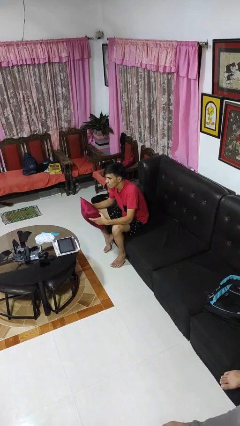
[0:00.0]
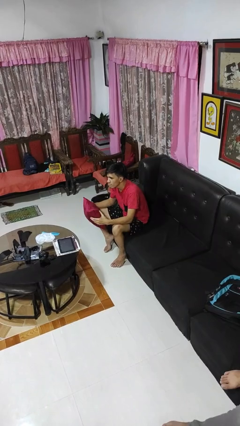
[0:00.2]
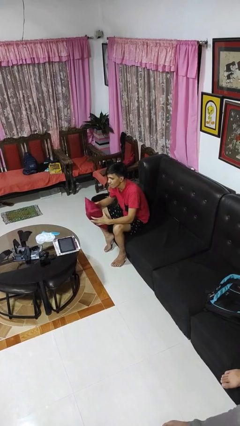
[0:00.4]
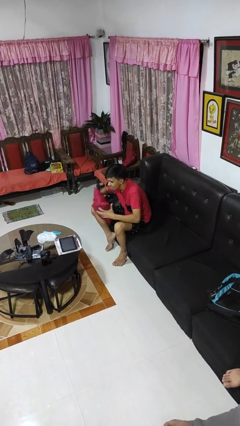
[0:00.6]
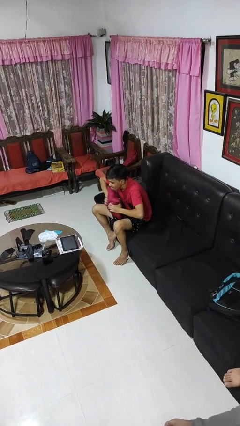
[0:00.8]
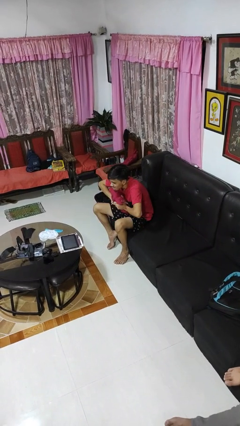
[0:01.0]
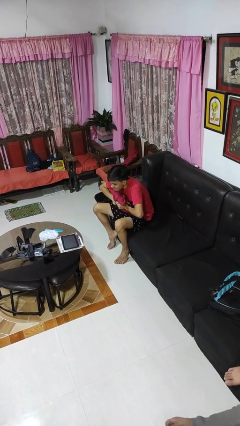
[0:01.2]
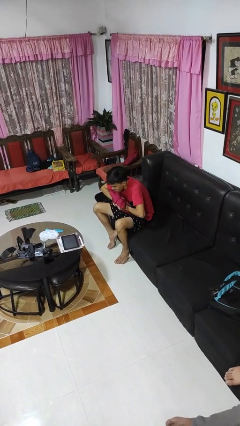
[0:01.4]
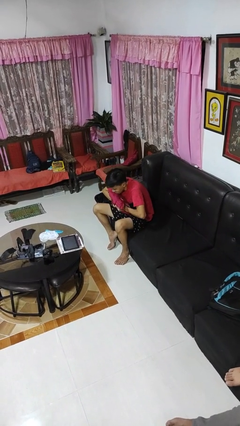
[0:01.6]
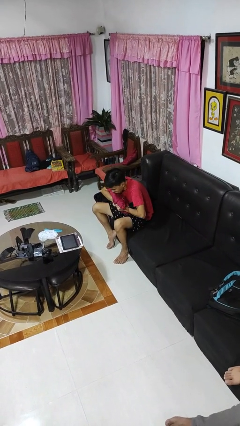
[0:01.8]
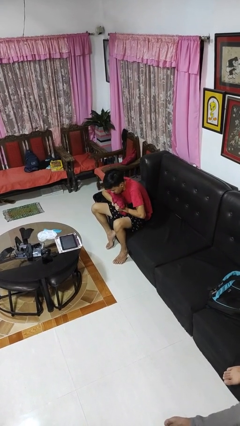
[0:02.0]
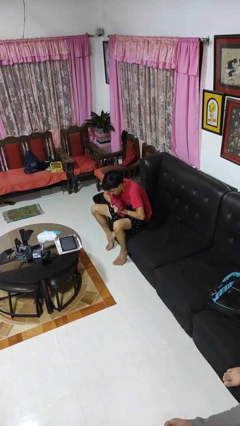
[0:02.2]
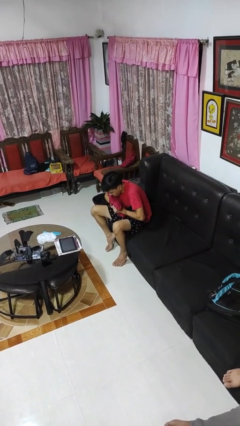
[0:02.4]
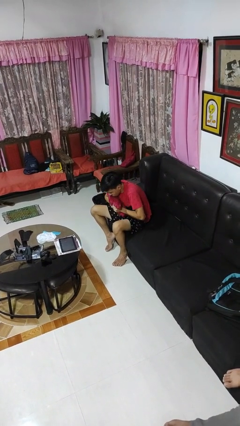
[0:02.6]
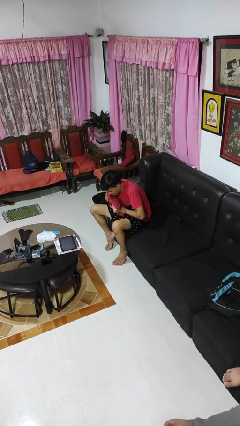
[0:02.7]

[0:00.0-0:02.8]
person squeezes object

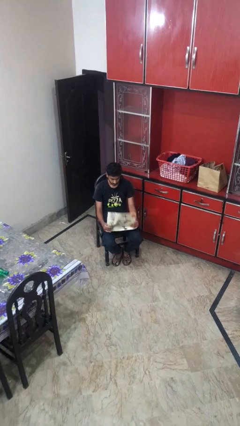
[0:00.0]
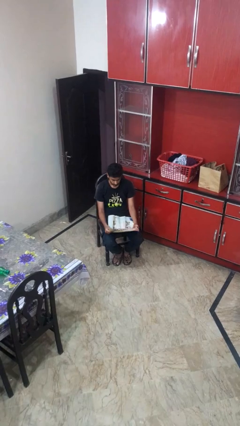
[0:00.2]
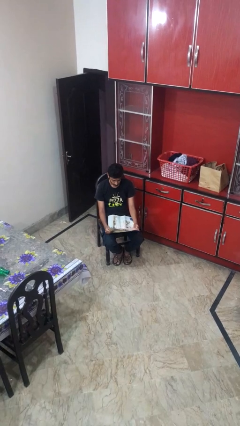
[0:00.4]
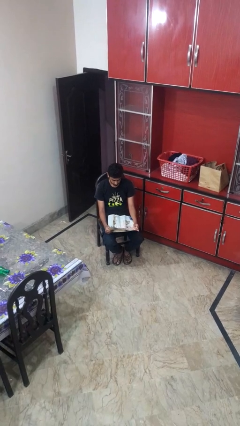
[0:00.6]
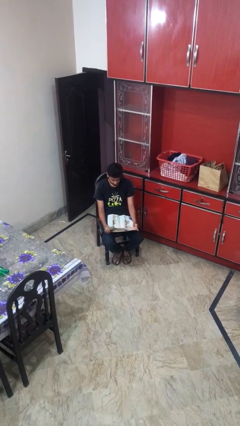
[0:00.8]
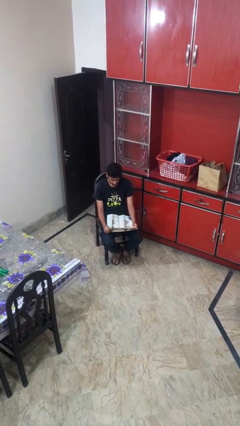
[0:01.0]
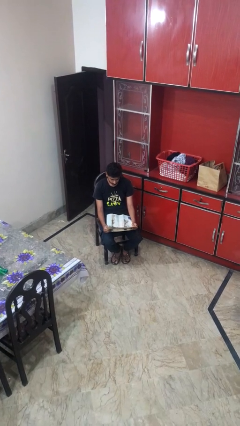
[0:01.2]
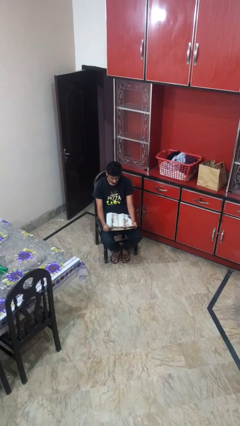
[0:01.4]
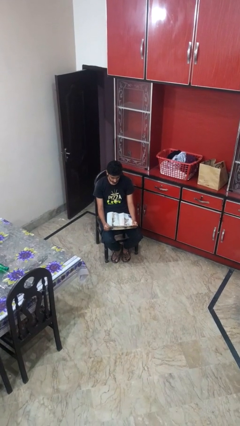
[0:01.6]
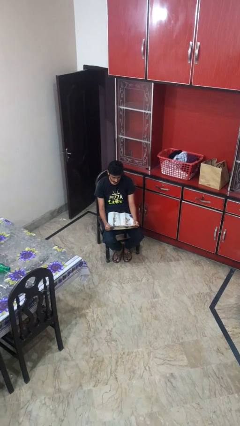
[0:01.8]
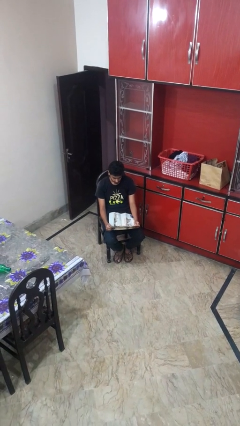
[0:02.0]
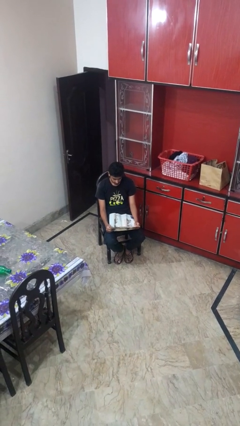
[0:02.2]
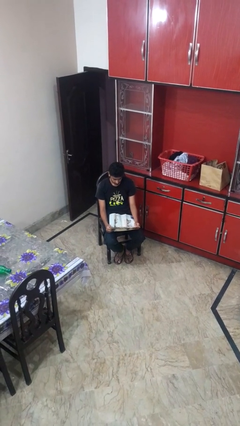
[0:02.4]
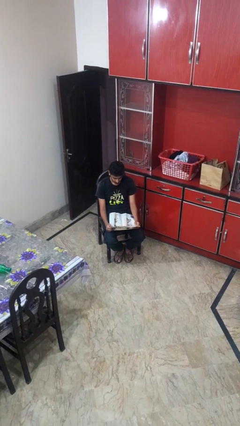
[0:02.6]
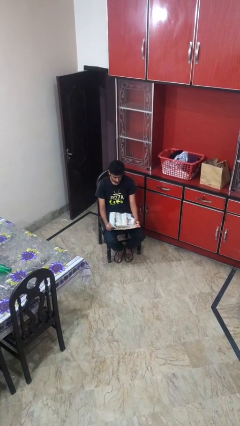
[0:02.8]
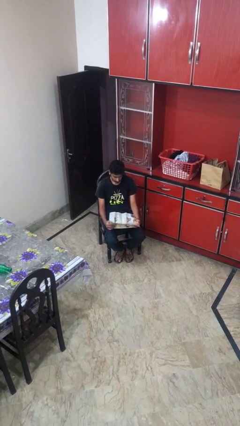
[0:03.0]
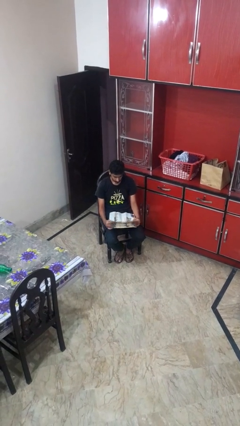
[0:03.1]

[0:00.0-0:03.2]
person reads newspaper

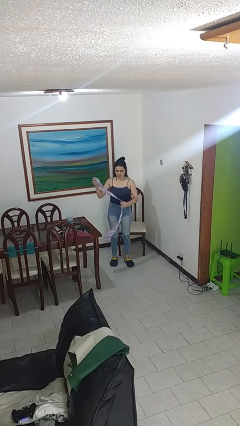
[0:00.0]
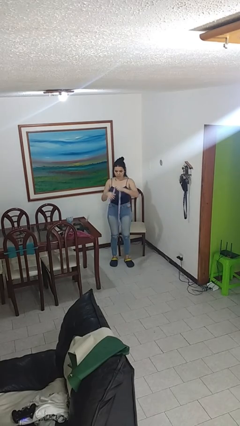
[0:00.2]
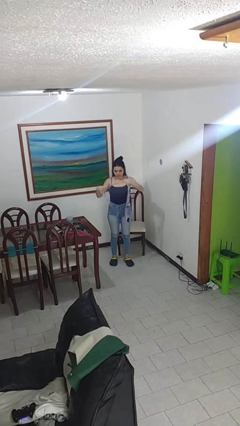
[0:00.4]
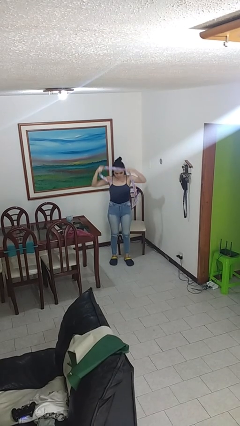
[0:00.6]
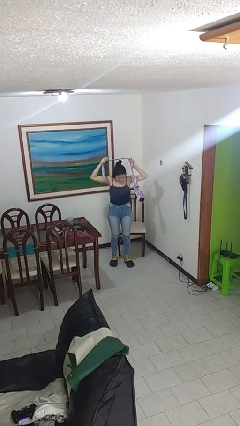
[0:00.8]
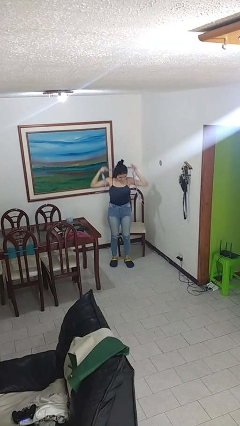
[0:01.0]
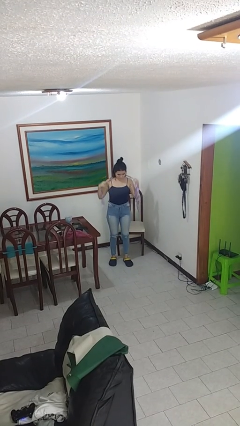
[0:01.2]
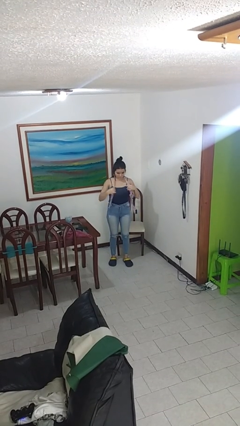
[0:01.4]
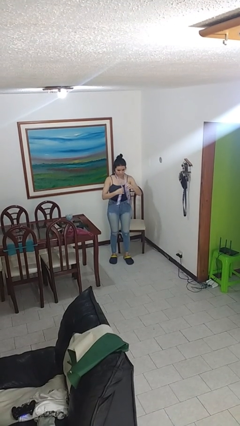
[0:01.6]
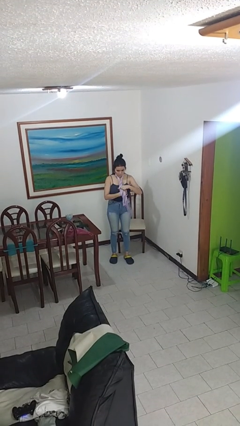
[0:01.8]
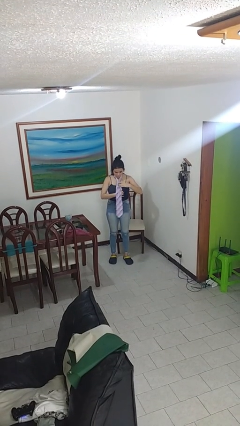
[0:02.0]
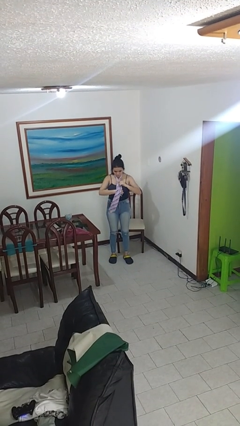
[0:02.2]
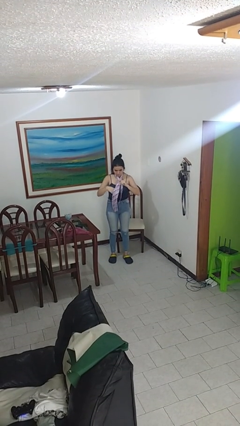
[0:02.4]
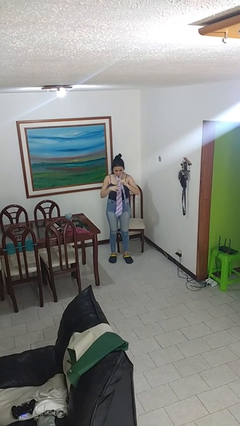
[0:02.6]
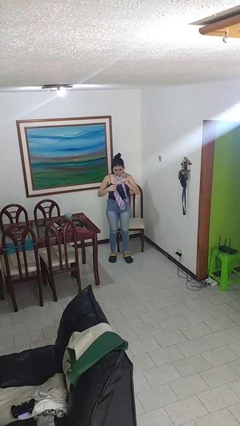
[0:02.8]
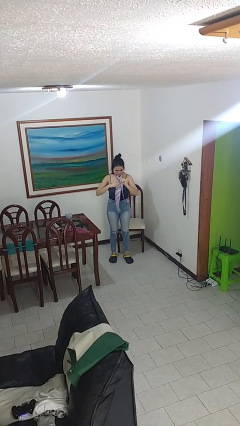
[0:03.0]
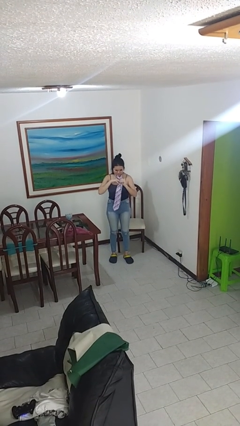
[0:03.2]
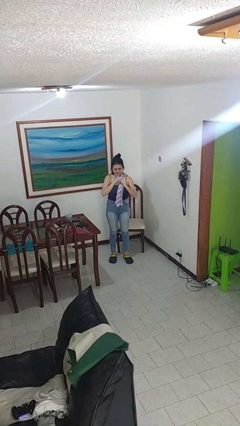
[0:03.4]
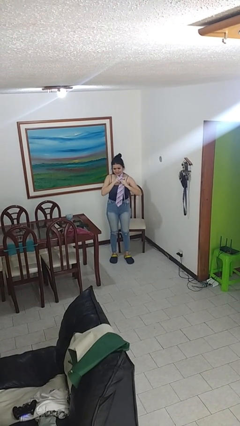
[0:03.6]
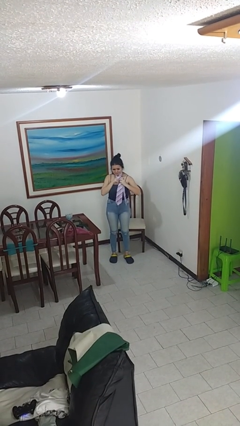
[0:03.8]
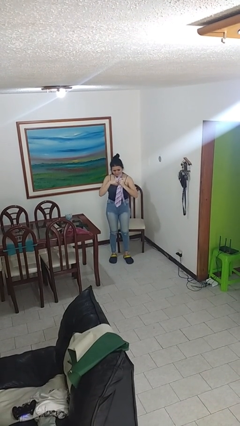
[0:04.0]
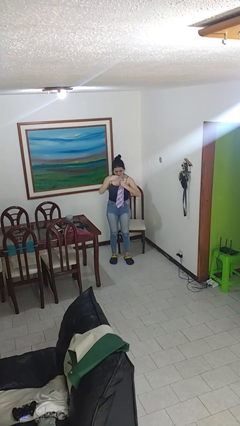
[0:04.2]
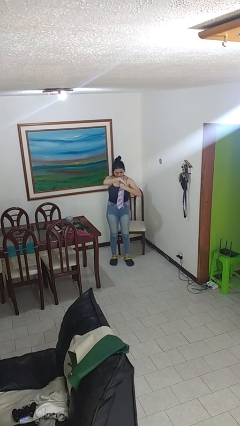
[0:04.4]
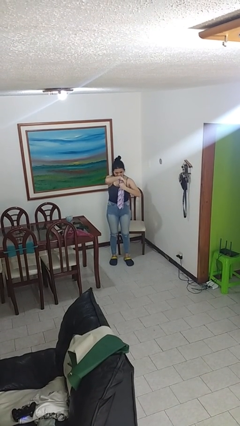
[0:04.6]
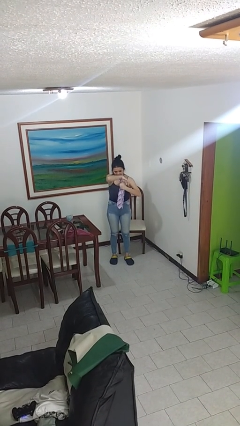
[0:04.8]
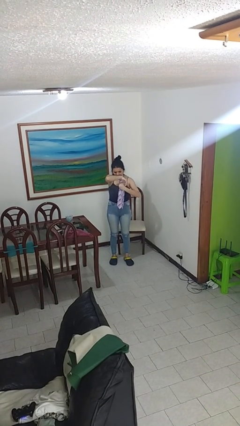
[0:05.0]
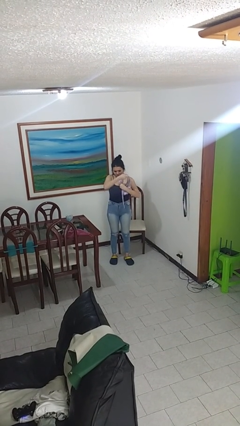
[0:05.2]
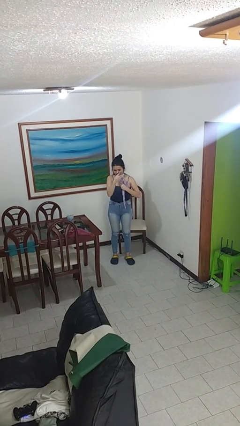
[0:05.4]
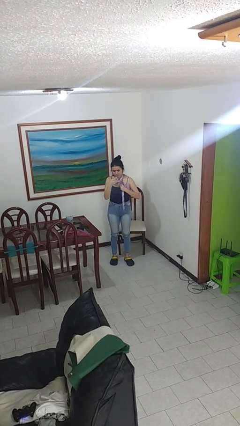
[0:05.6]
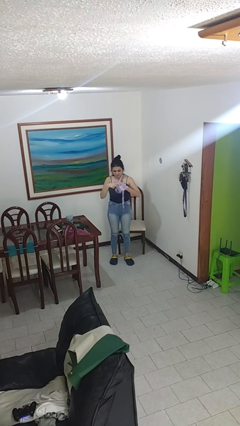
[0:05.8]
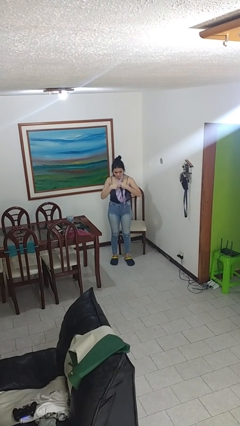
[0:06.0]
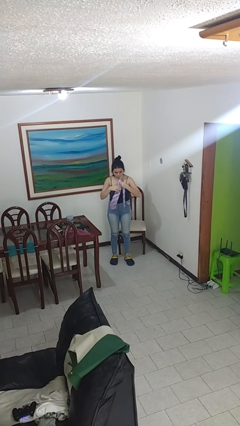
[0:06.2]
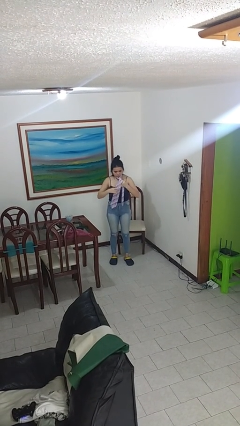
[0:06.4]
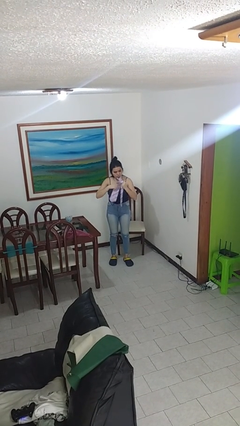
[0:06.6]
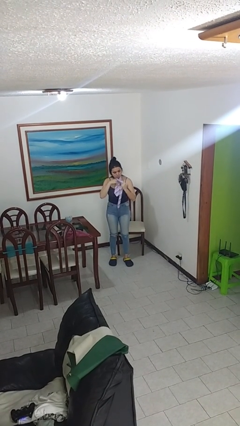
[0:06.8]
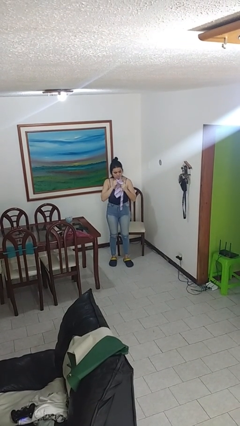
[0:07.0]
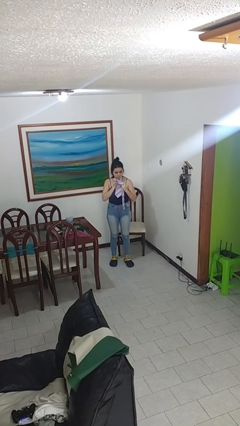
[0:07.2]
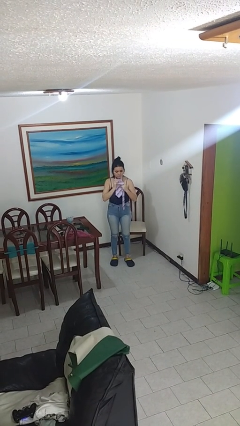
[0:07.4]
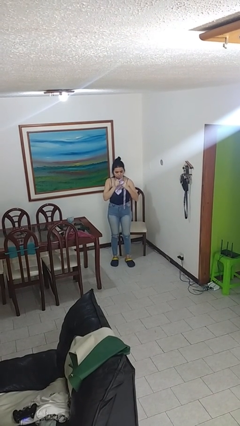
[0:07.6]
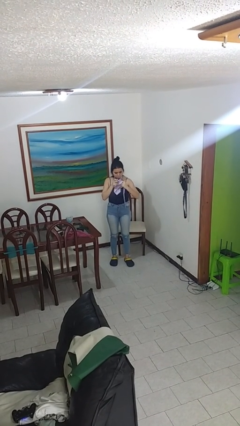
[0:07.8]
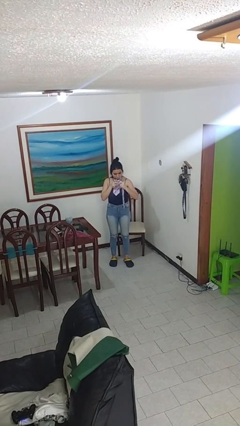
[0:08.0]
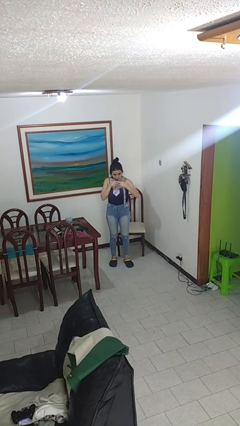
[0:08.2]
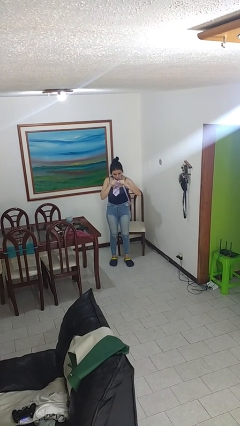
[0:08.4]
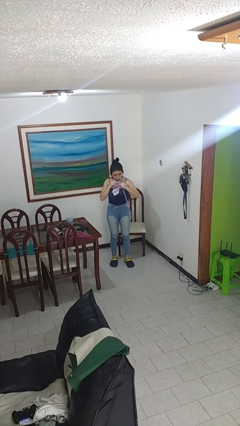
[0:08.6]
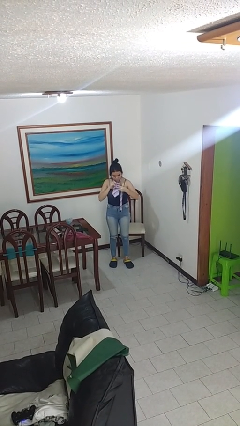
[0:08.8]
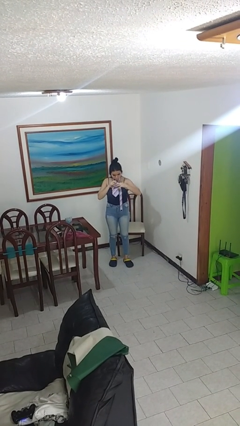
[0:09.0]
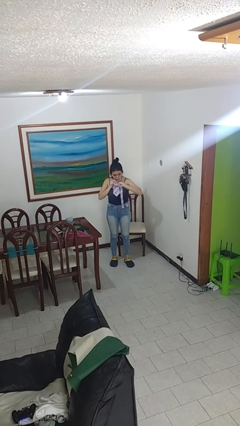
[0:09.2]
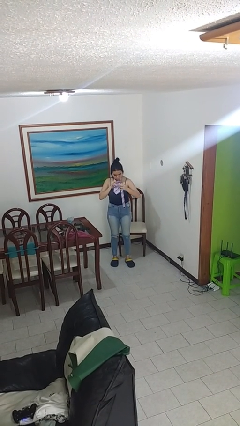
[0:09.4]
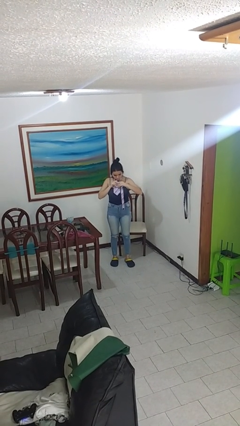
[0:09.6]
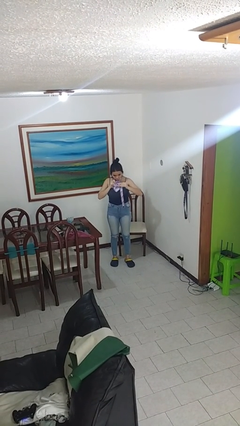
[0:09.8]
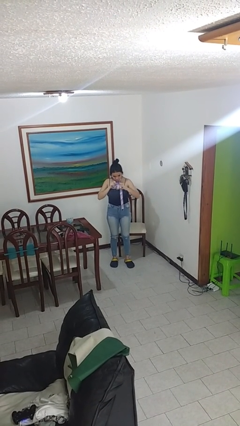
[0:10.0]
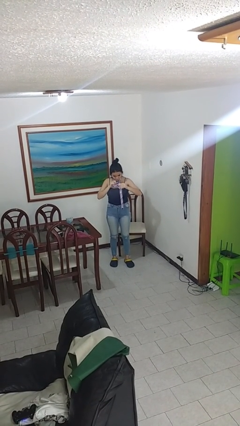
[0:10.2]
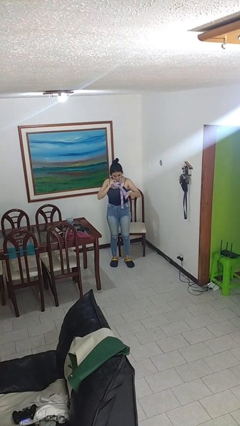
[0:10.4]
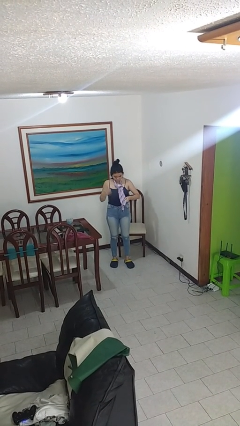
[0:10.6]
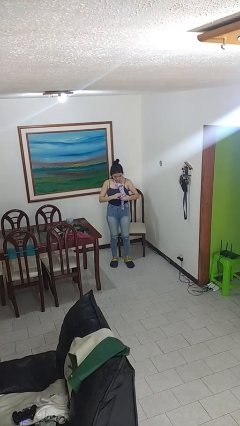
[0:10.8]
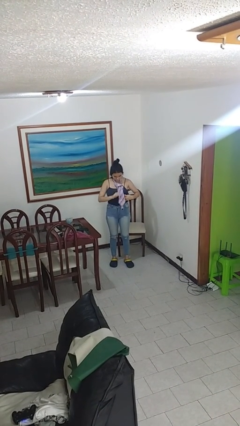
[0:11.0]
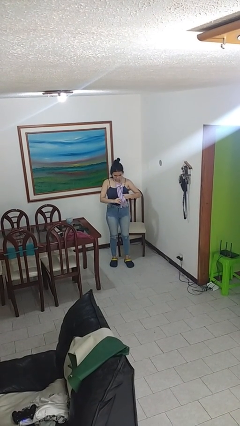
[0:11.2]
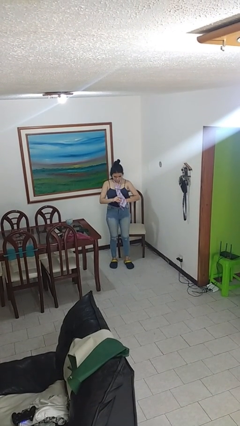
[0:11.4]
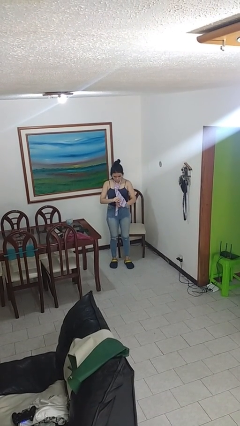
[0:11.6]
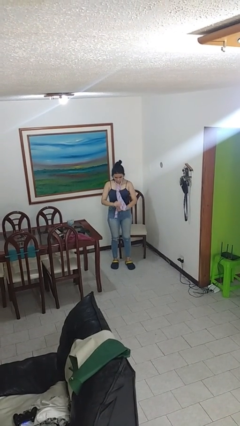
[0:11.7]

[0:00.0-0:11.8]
person puts on necktie

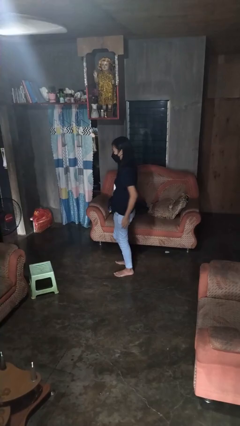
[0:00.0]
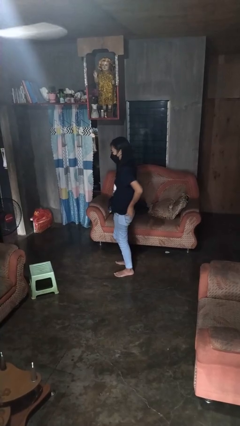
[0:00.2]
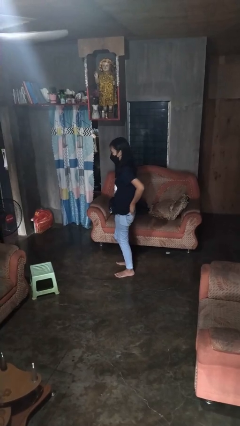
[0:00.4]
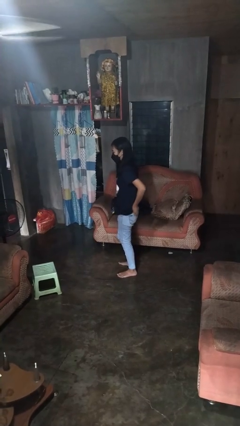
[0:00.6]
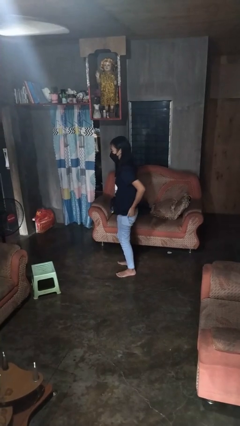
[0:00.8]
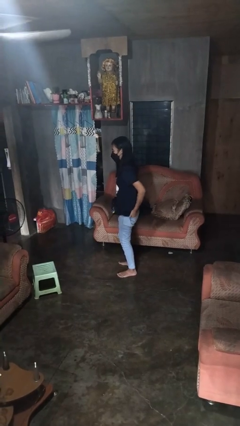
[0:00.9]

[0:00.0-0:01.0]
person puts hands in back pockets
